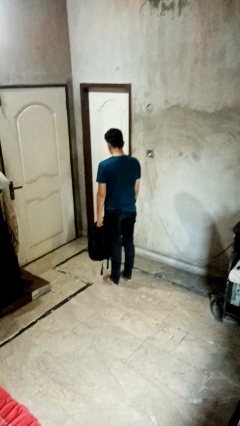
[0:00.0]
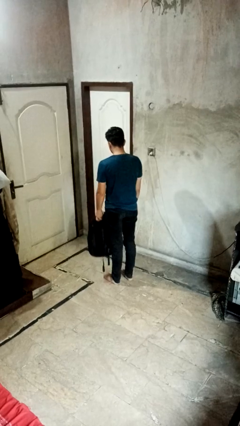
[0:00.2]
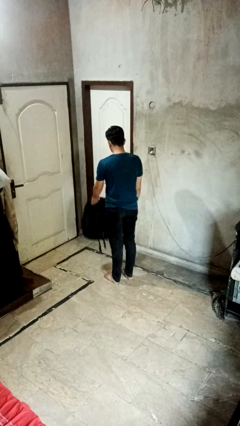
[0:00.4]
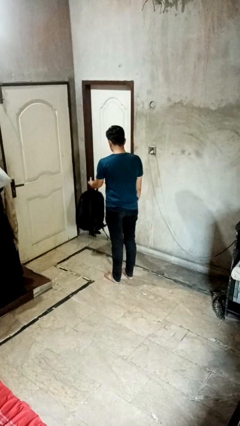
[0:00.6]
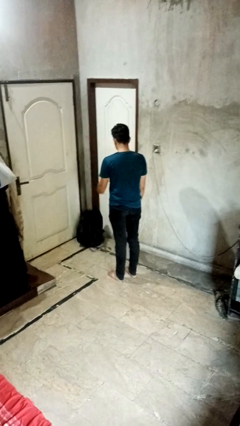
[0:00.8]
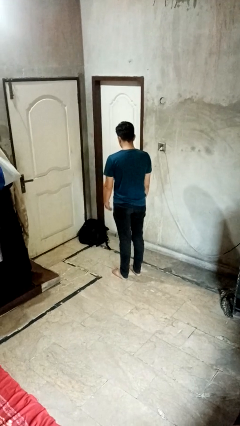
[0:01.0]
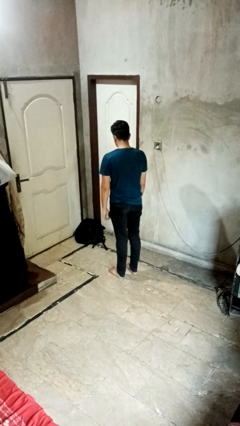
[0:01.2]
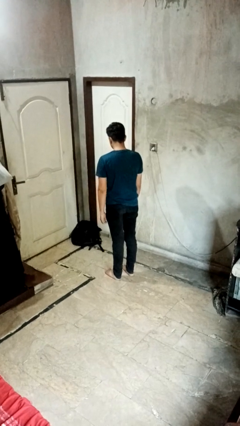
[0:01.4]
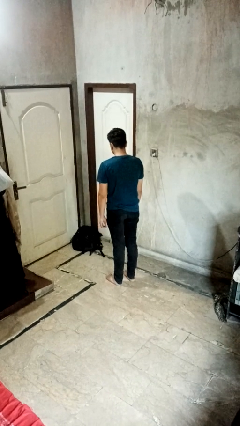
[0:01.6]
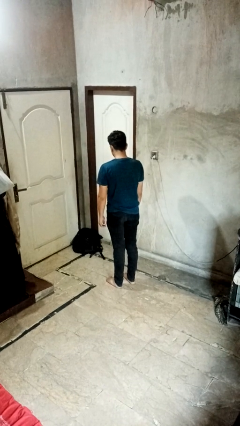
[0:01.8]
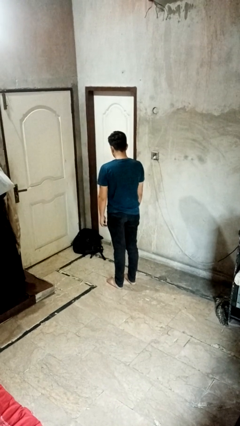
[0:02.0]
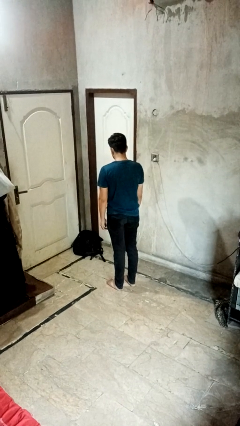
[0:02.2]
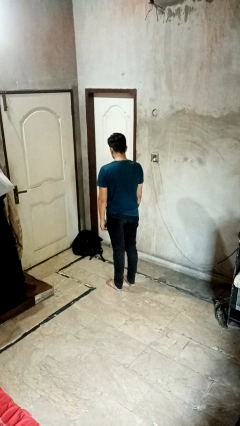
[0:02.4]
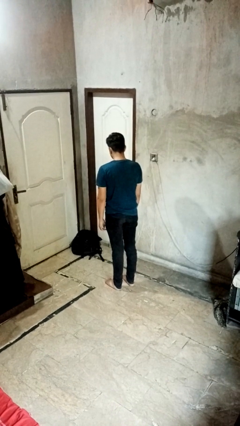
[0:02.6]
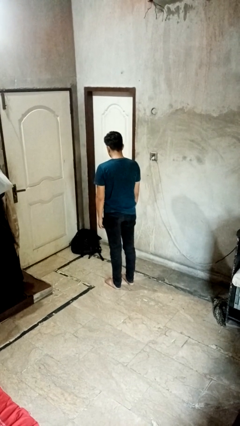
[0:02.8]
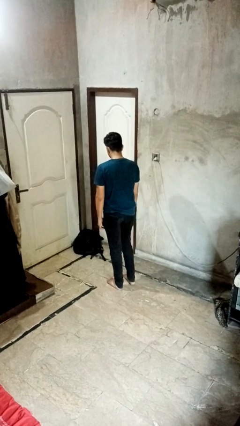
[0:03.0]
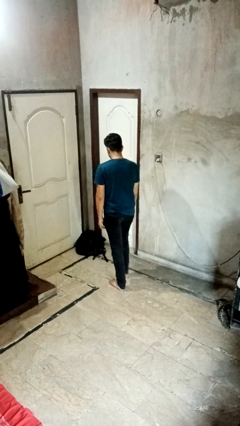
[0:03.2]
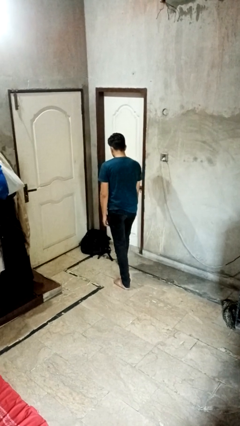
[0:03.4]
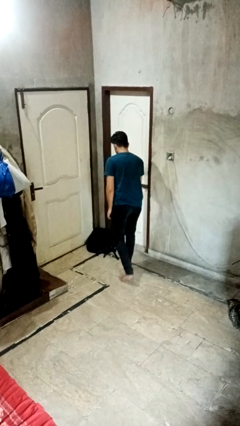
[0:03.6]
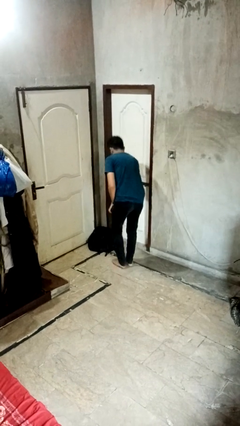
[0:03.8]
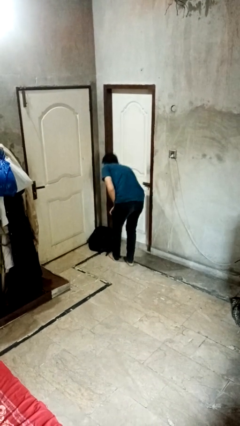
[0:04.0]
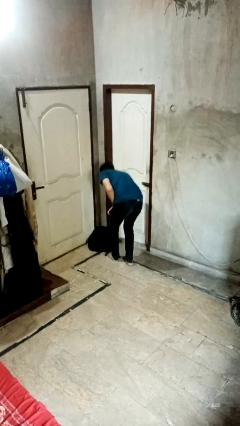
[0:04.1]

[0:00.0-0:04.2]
person throws object to ground

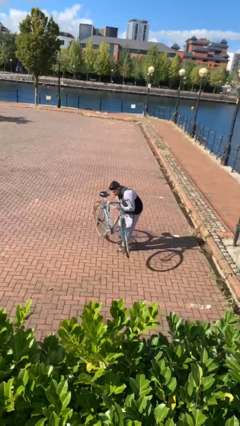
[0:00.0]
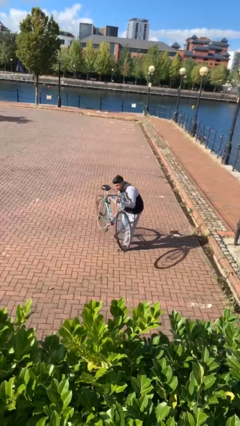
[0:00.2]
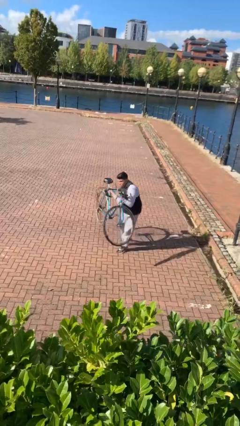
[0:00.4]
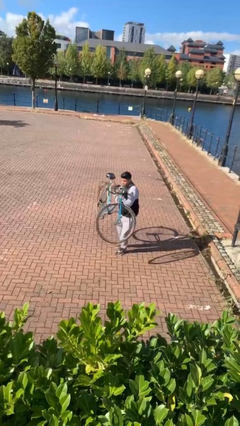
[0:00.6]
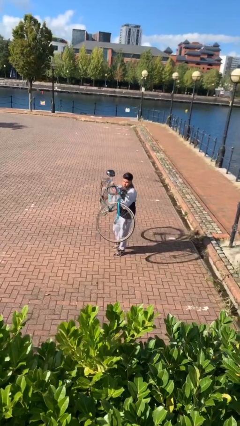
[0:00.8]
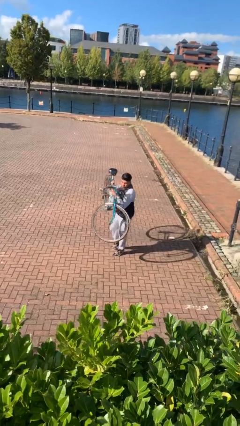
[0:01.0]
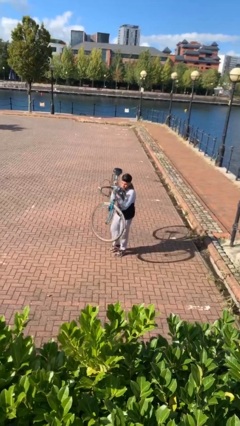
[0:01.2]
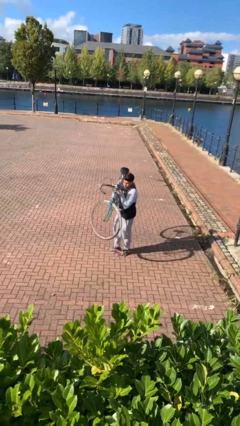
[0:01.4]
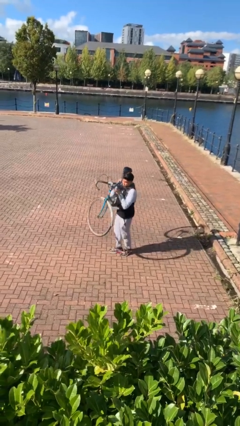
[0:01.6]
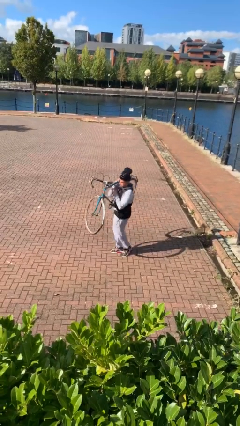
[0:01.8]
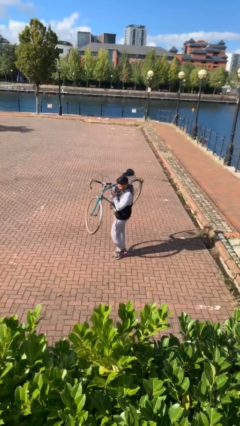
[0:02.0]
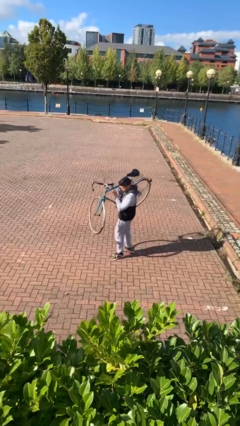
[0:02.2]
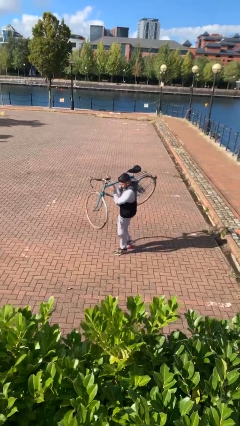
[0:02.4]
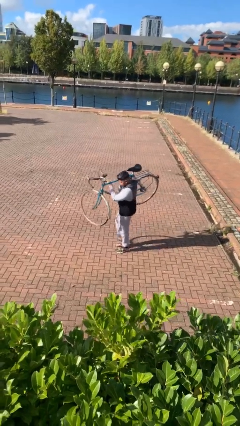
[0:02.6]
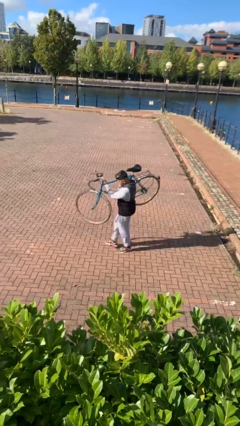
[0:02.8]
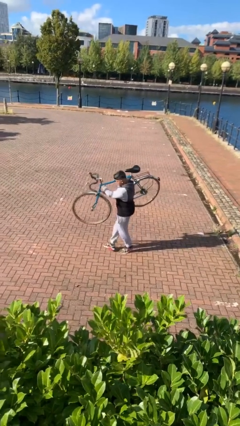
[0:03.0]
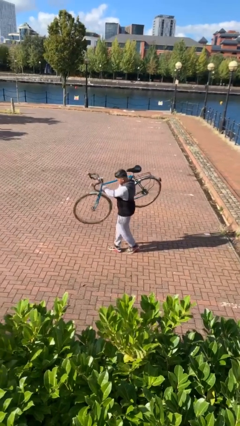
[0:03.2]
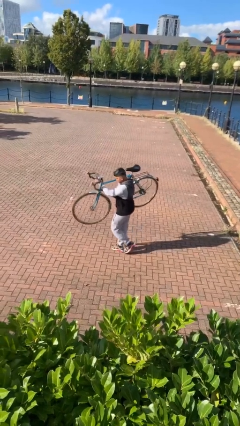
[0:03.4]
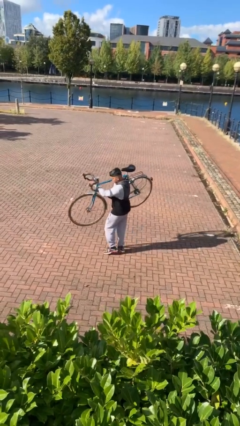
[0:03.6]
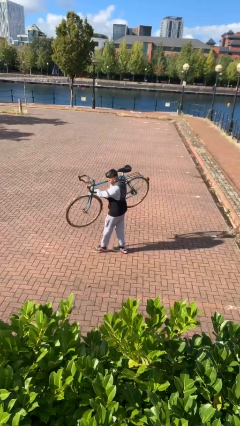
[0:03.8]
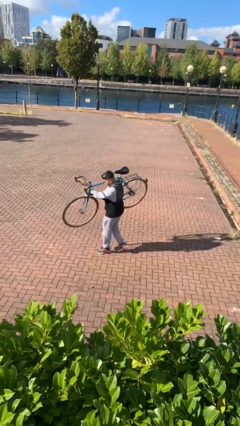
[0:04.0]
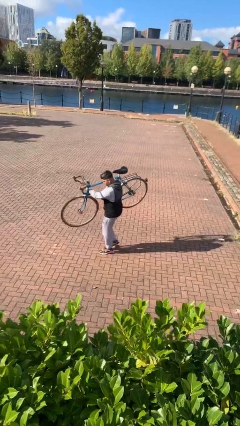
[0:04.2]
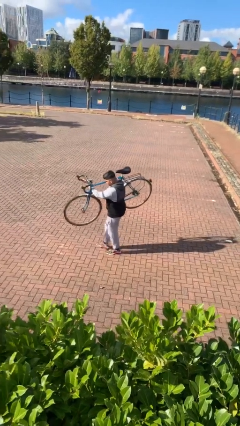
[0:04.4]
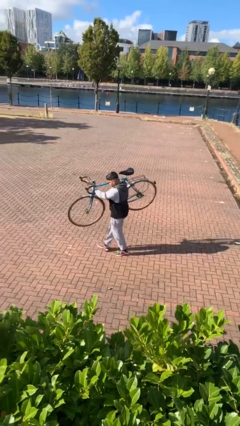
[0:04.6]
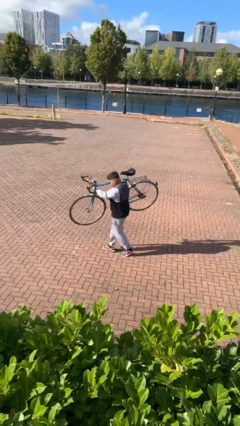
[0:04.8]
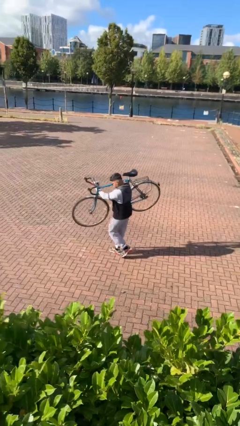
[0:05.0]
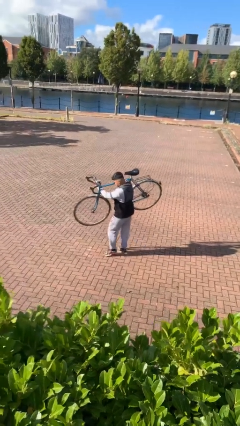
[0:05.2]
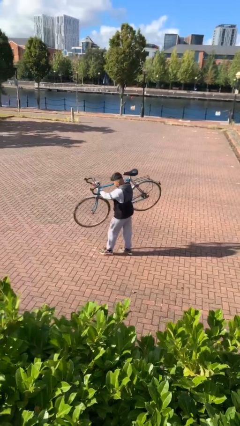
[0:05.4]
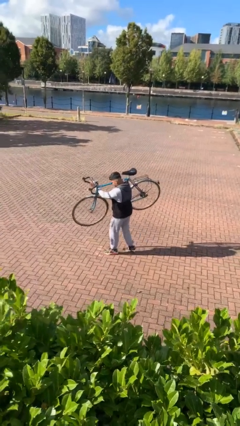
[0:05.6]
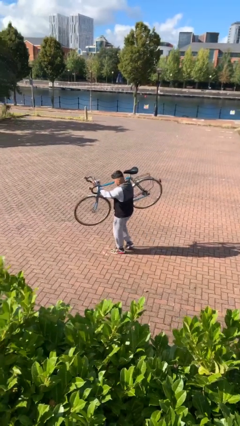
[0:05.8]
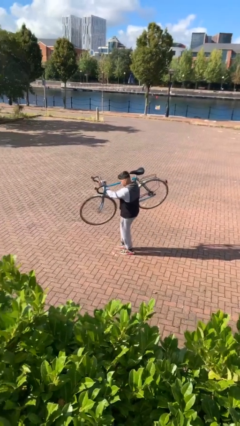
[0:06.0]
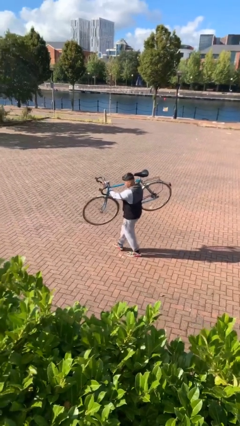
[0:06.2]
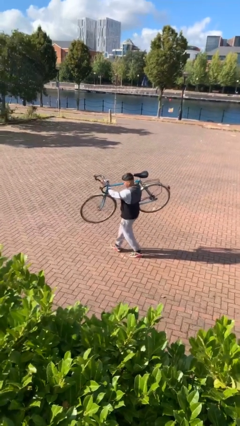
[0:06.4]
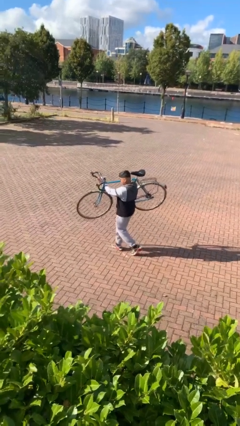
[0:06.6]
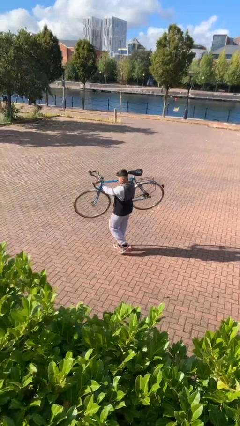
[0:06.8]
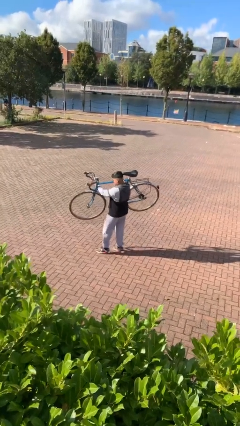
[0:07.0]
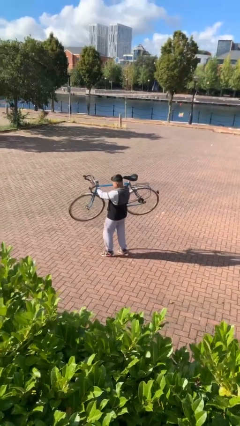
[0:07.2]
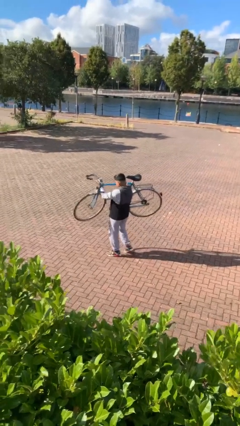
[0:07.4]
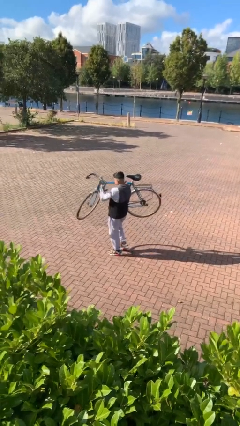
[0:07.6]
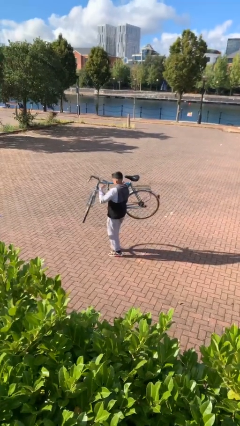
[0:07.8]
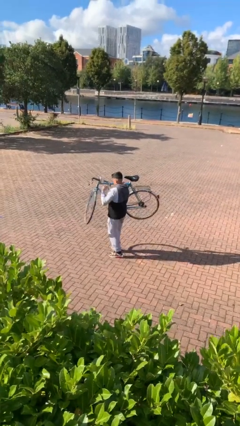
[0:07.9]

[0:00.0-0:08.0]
person carries heavy object

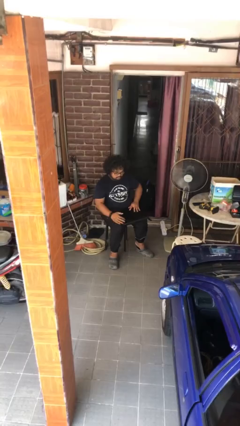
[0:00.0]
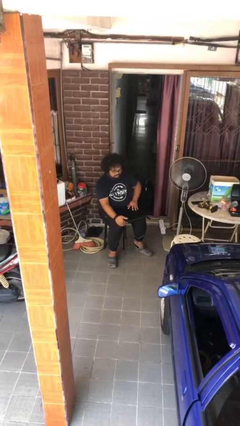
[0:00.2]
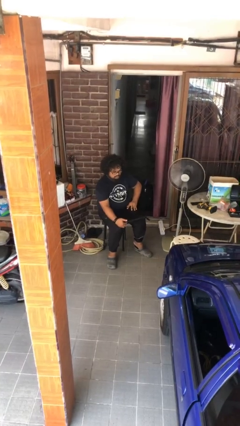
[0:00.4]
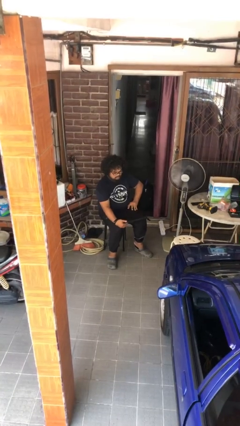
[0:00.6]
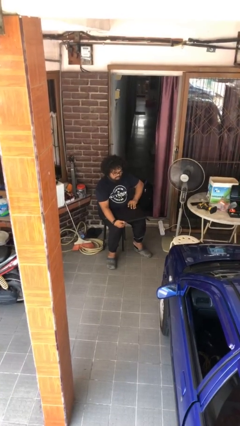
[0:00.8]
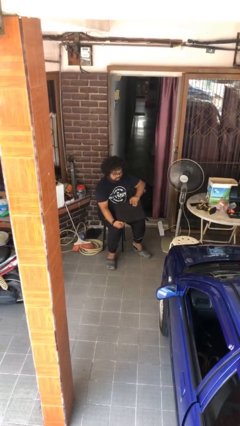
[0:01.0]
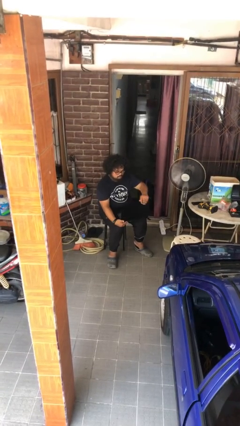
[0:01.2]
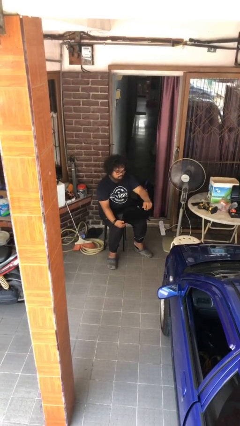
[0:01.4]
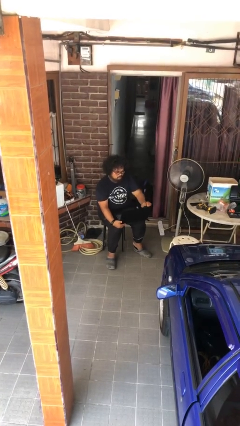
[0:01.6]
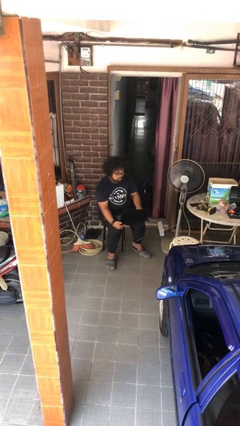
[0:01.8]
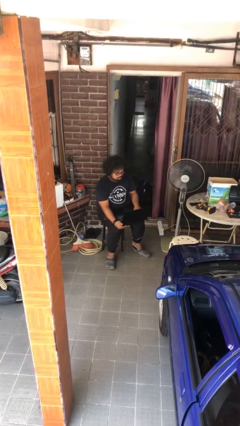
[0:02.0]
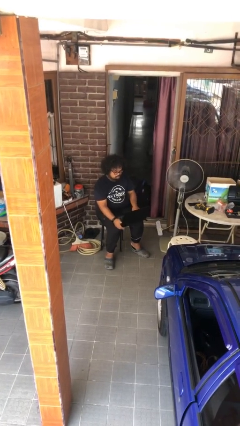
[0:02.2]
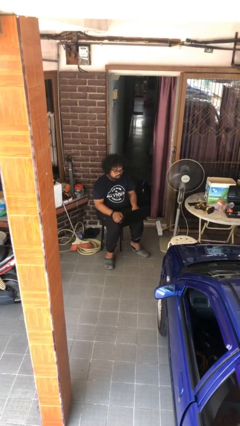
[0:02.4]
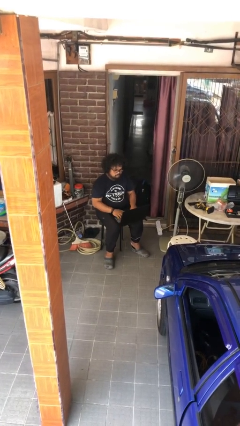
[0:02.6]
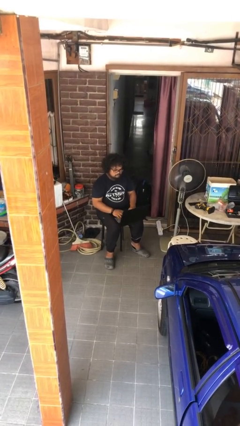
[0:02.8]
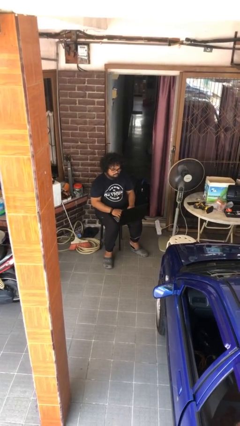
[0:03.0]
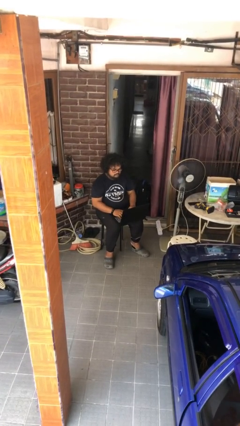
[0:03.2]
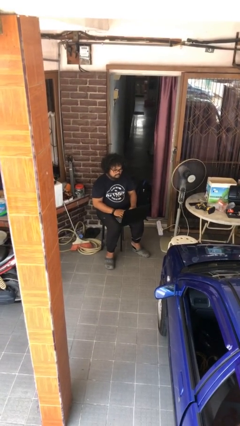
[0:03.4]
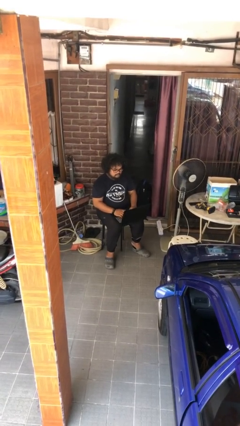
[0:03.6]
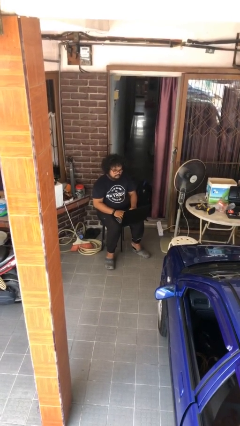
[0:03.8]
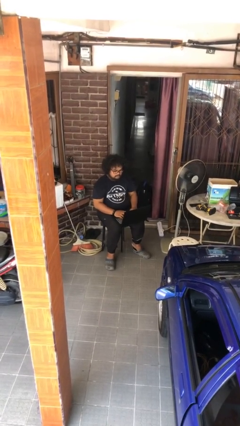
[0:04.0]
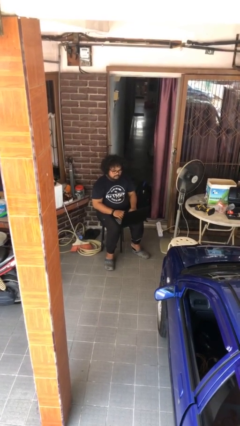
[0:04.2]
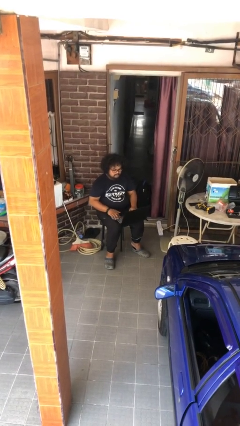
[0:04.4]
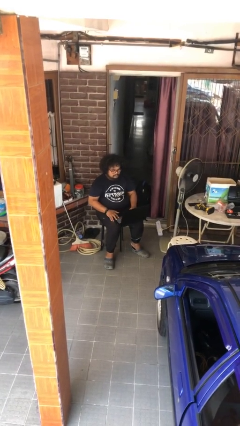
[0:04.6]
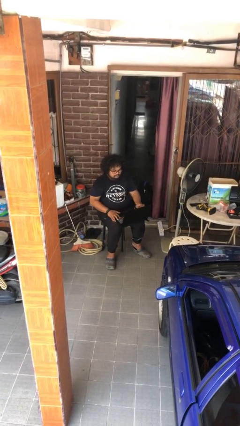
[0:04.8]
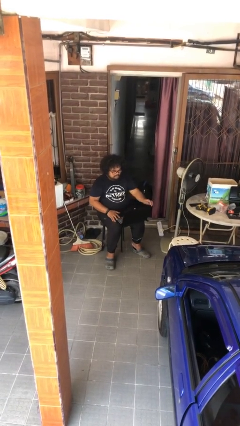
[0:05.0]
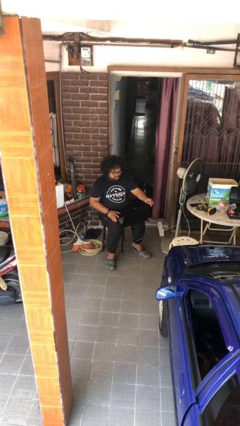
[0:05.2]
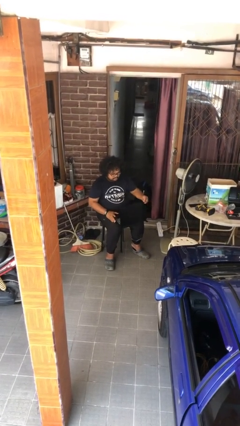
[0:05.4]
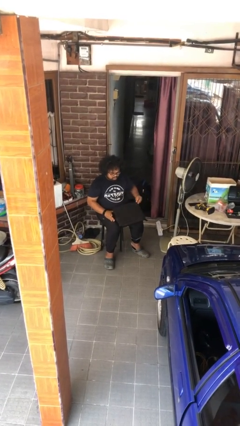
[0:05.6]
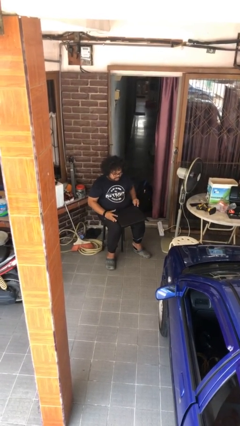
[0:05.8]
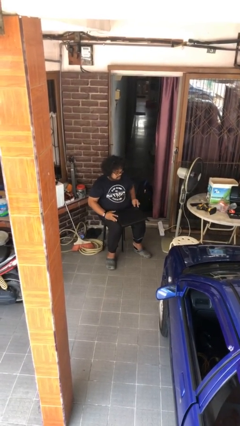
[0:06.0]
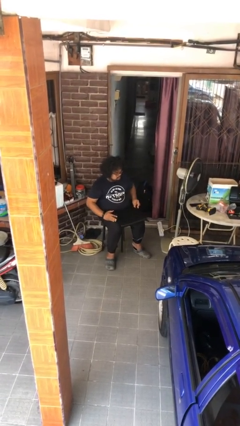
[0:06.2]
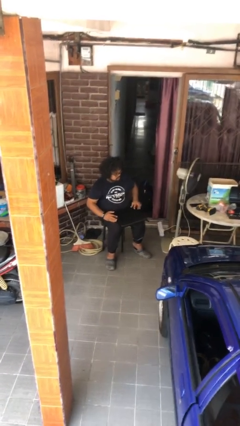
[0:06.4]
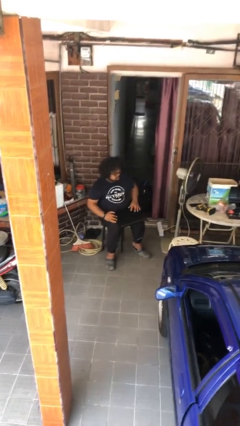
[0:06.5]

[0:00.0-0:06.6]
person interacts with laptop
